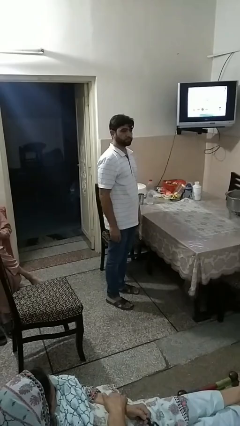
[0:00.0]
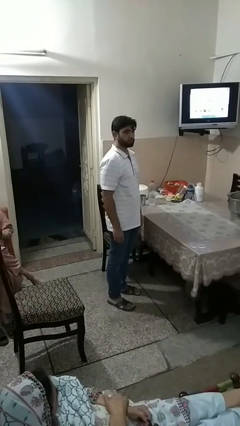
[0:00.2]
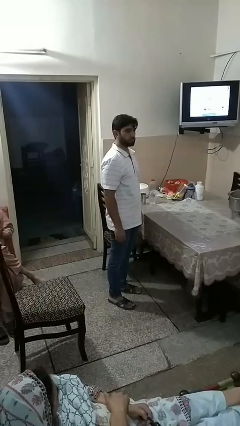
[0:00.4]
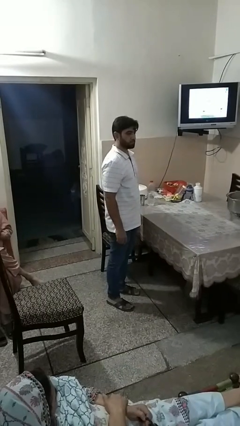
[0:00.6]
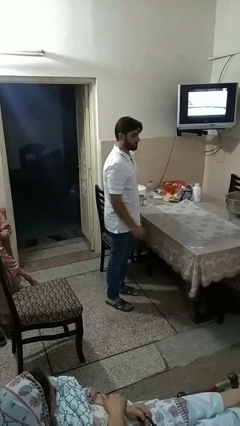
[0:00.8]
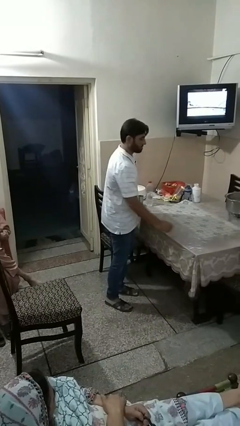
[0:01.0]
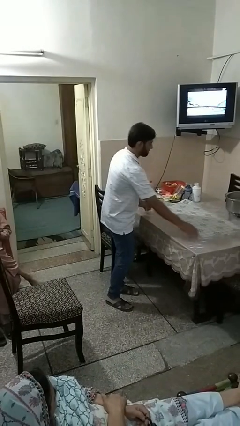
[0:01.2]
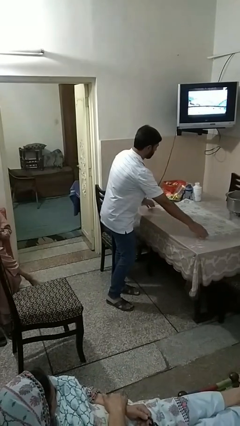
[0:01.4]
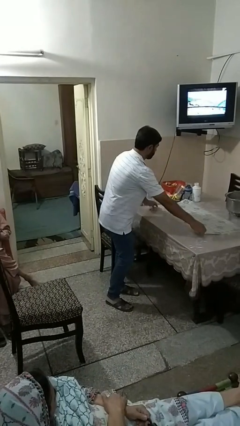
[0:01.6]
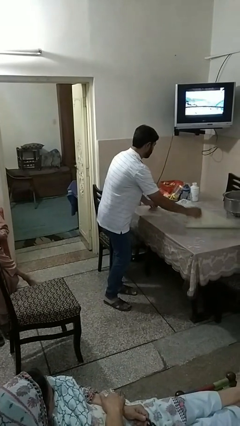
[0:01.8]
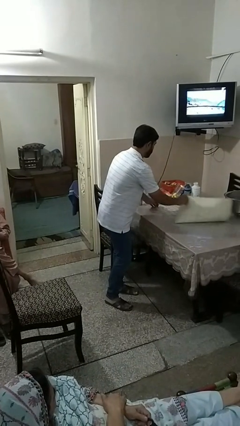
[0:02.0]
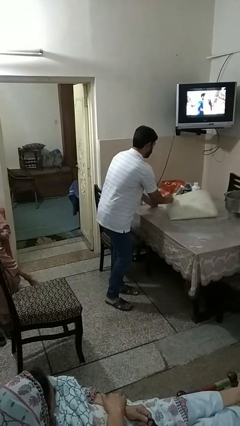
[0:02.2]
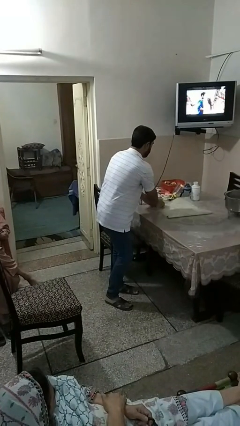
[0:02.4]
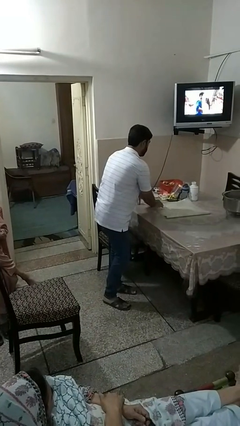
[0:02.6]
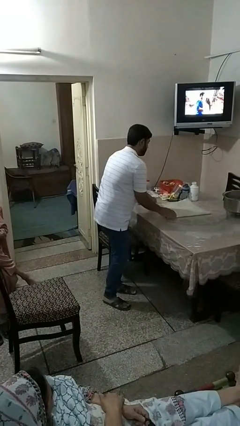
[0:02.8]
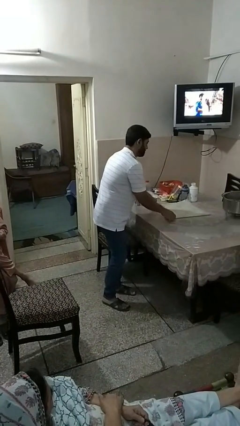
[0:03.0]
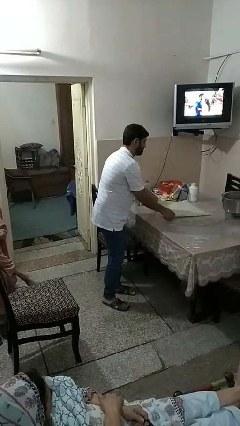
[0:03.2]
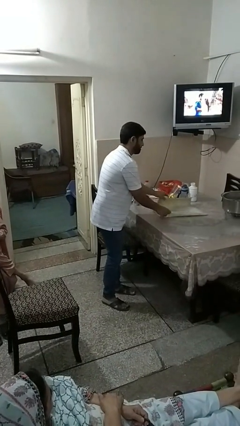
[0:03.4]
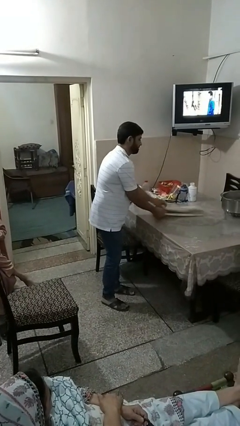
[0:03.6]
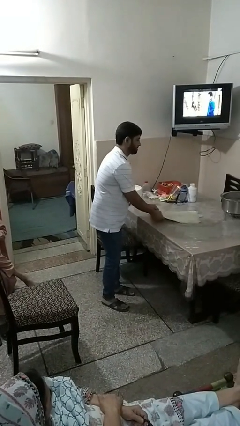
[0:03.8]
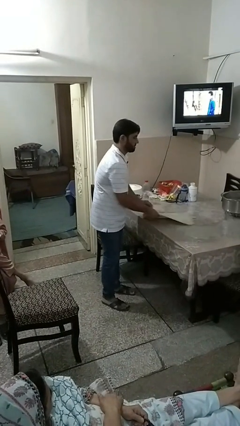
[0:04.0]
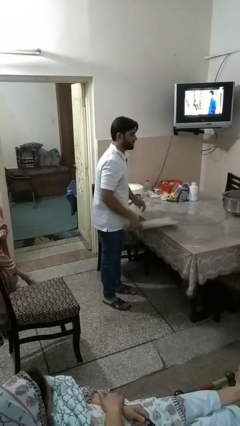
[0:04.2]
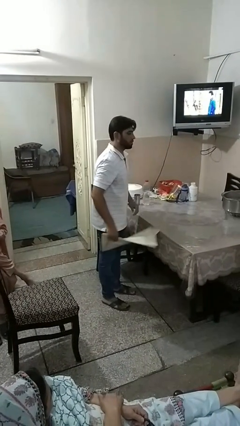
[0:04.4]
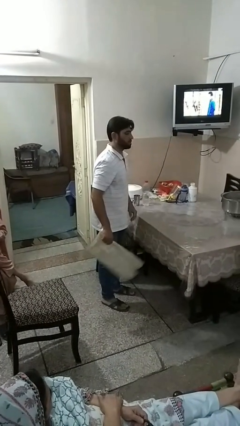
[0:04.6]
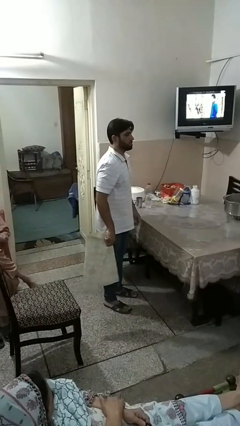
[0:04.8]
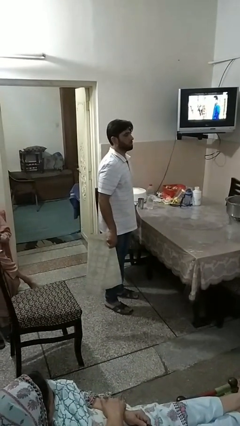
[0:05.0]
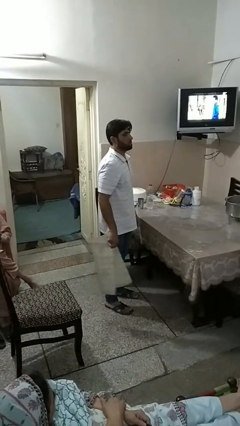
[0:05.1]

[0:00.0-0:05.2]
person folds tablecloth

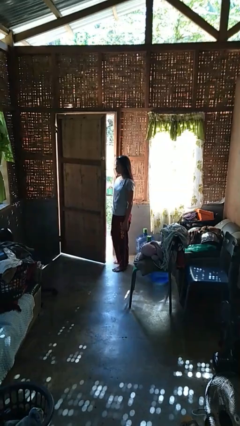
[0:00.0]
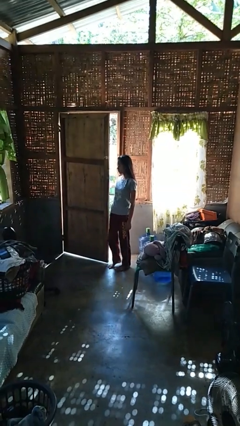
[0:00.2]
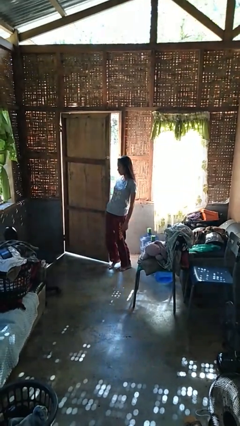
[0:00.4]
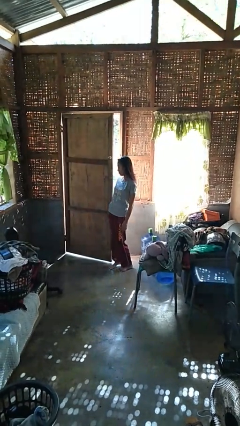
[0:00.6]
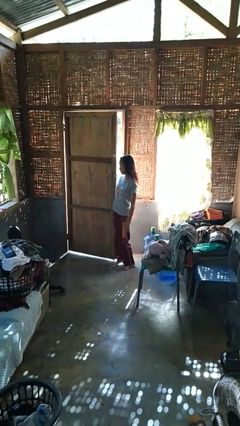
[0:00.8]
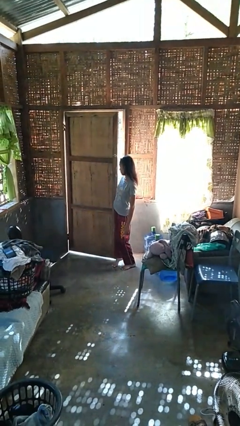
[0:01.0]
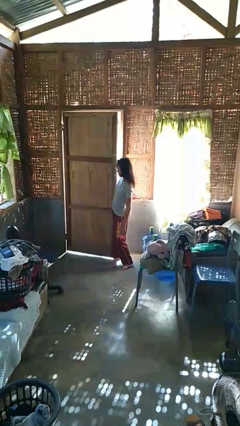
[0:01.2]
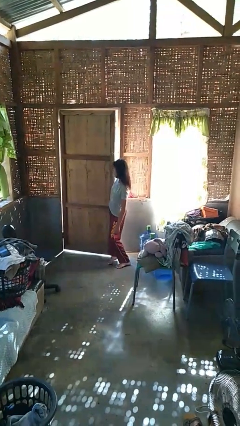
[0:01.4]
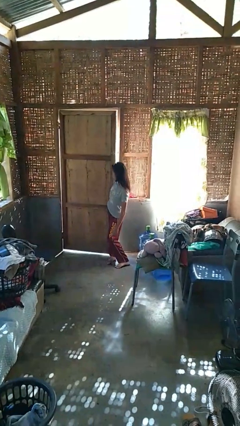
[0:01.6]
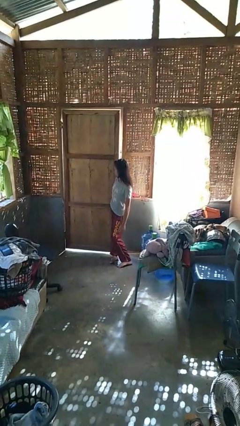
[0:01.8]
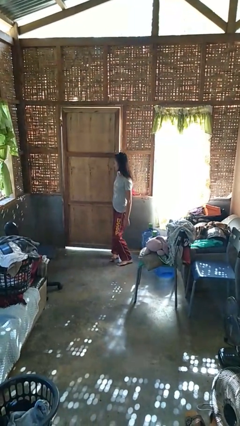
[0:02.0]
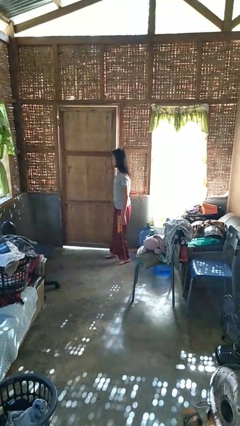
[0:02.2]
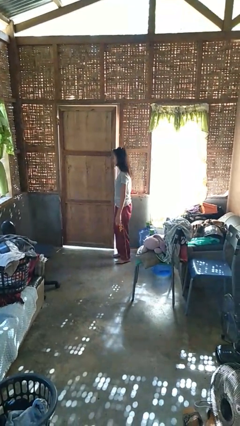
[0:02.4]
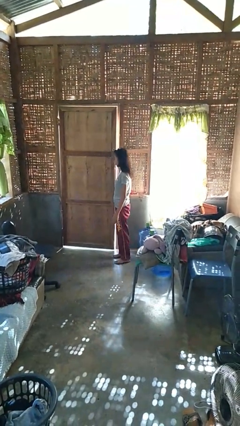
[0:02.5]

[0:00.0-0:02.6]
person closes door with hip

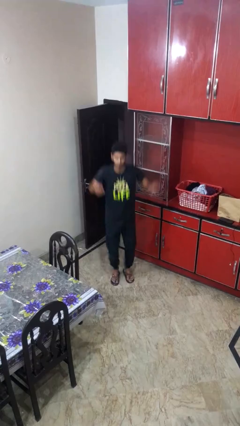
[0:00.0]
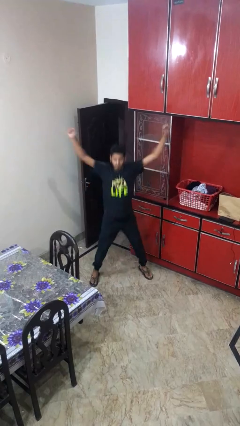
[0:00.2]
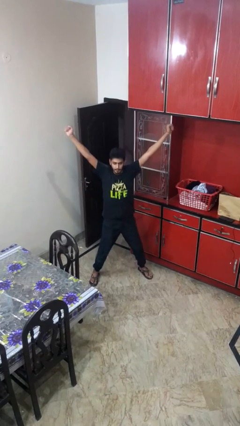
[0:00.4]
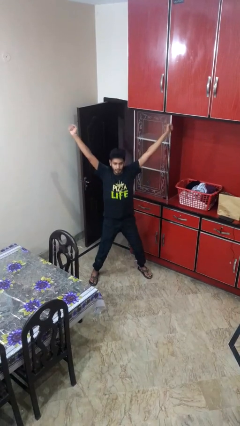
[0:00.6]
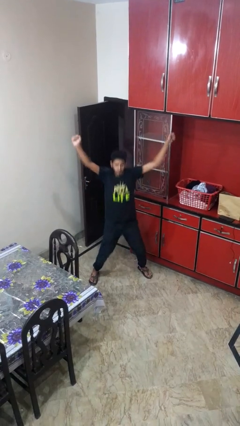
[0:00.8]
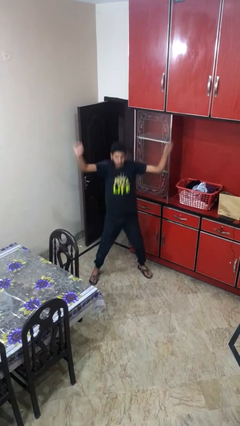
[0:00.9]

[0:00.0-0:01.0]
person exercises with jumping jacks

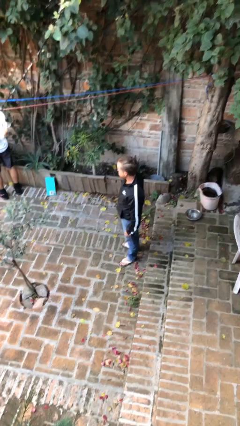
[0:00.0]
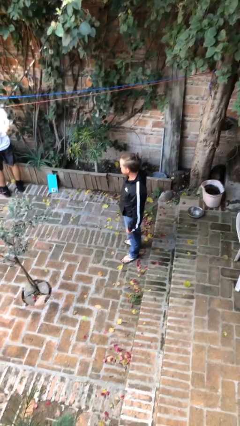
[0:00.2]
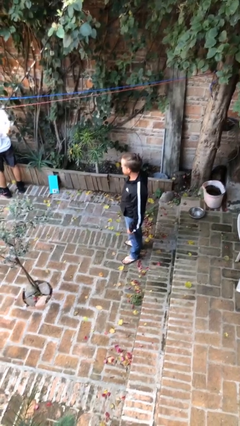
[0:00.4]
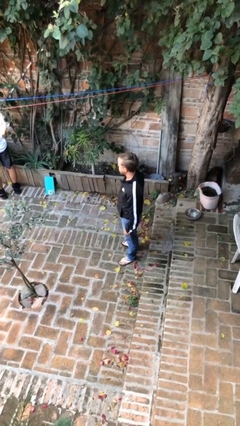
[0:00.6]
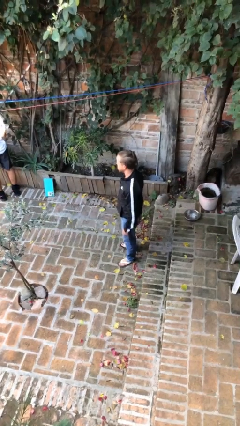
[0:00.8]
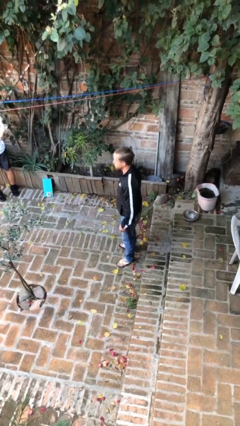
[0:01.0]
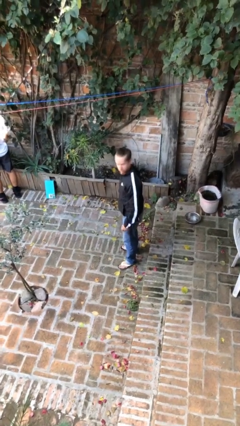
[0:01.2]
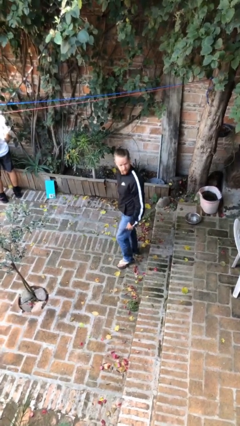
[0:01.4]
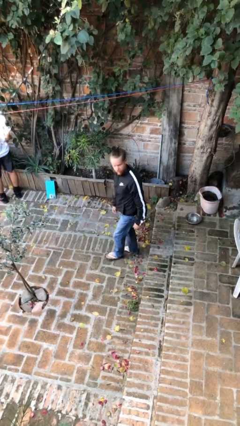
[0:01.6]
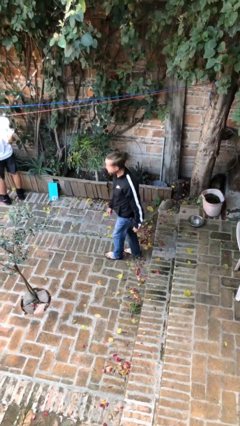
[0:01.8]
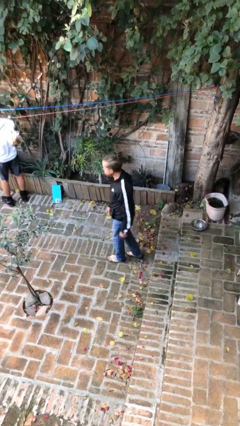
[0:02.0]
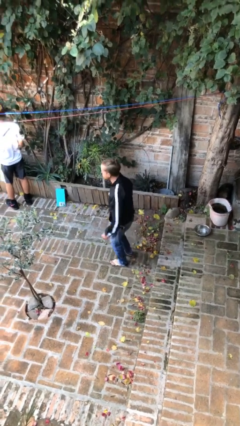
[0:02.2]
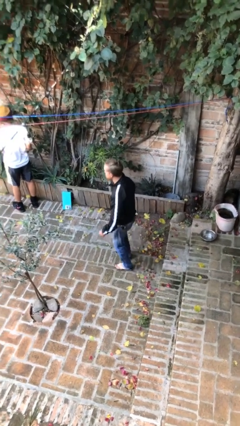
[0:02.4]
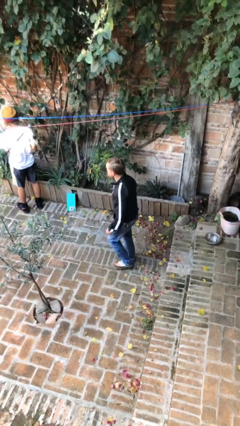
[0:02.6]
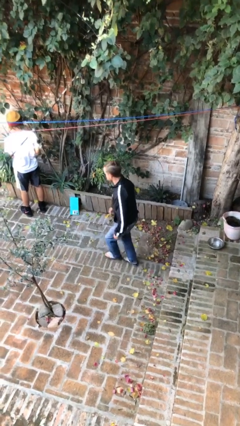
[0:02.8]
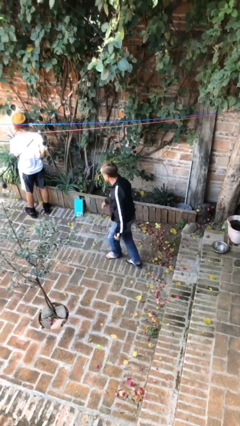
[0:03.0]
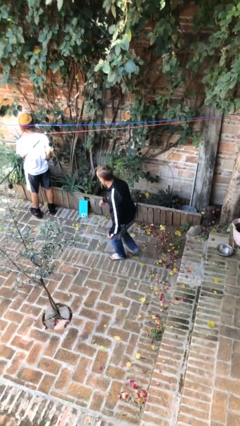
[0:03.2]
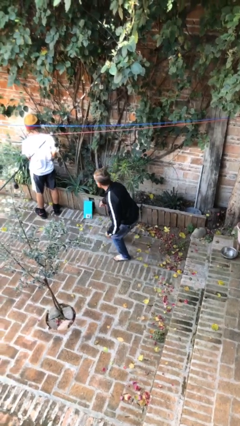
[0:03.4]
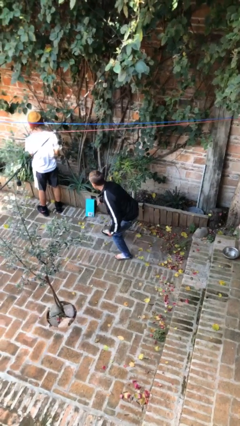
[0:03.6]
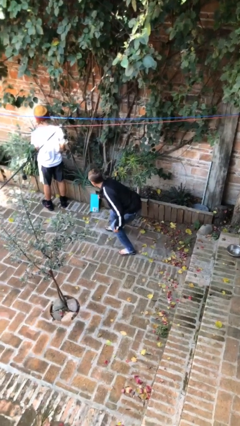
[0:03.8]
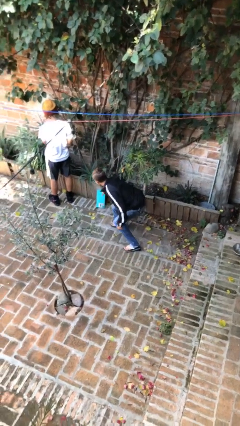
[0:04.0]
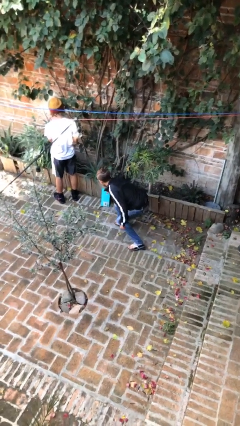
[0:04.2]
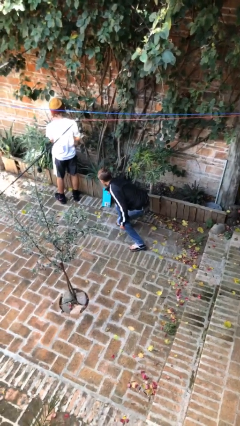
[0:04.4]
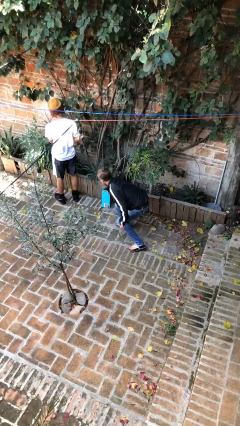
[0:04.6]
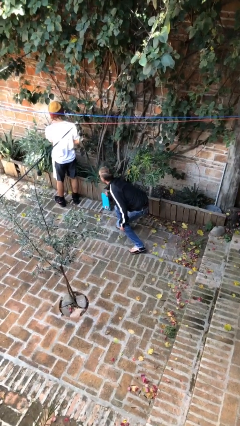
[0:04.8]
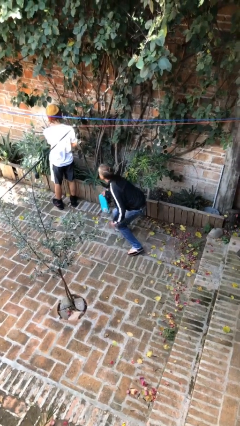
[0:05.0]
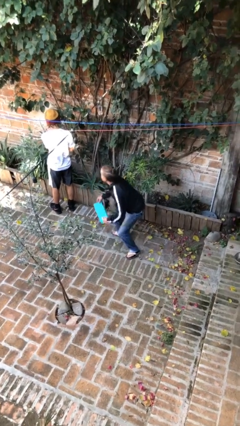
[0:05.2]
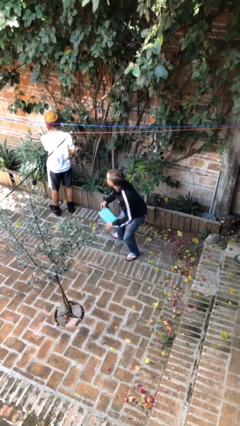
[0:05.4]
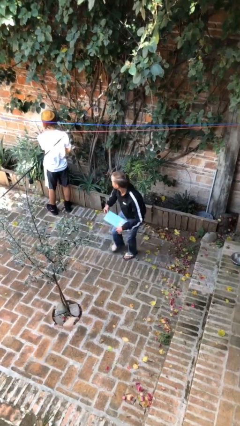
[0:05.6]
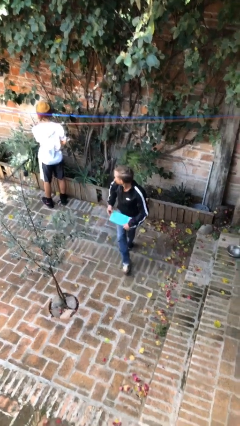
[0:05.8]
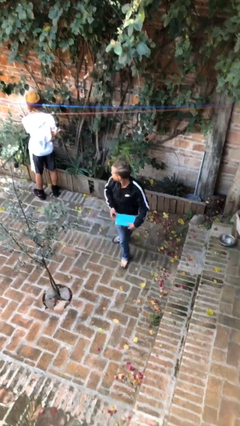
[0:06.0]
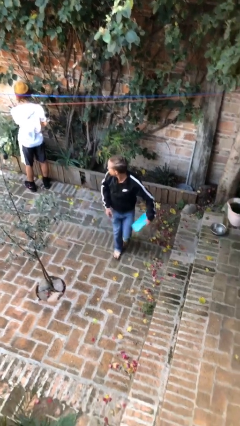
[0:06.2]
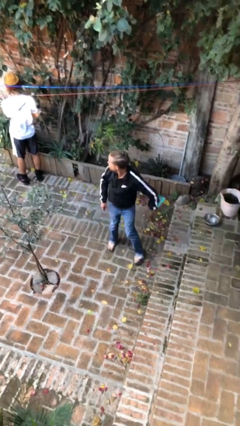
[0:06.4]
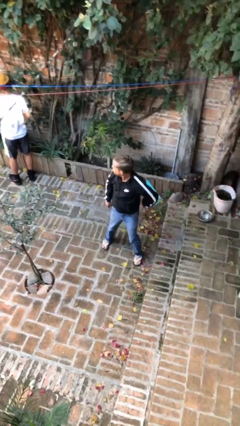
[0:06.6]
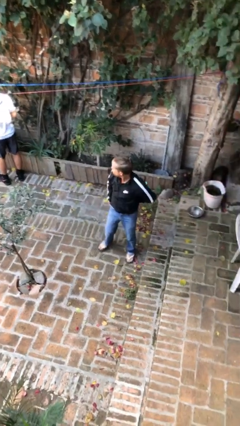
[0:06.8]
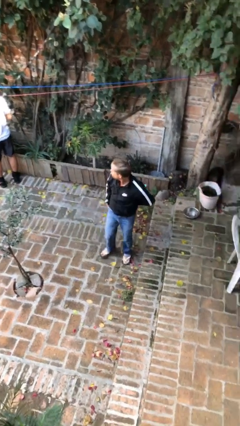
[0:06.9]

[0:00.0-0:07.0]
person steals object from person

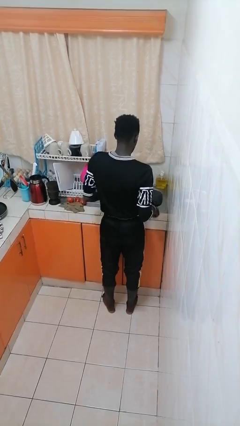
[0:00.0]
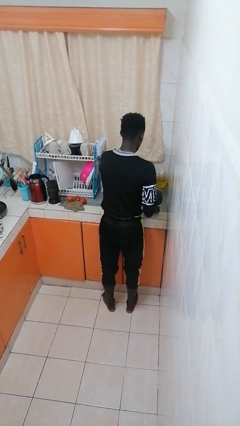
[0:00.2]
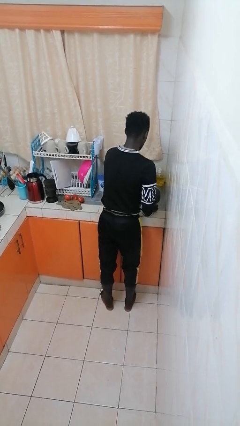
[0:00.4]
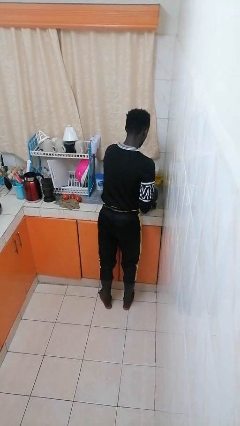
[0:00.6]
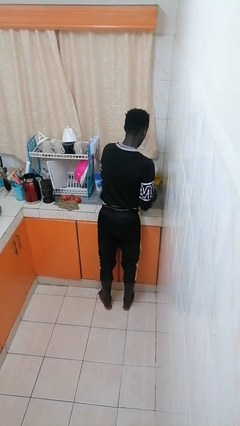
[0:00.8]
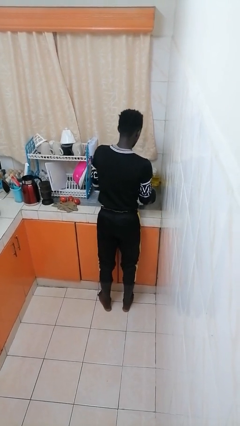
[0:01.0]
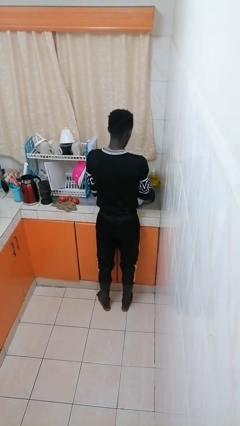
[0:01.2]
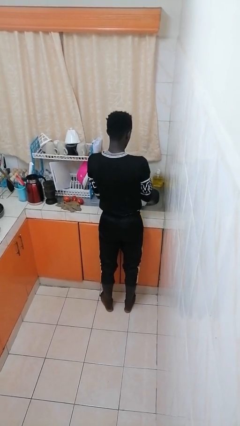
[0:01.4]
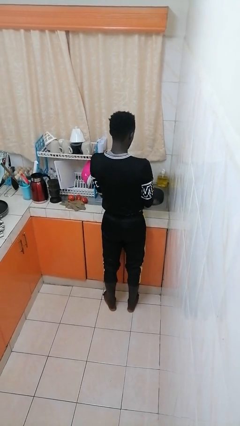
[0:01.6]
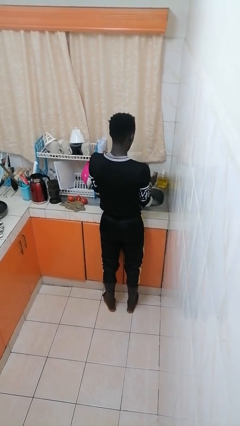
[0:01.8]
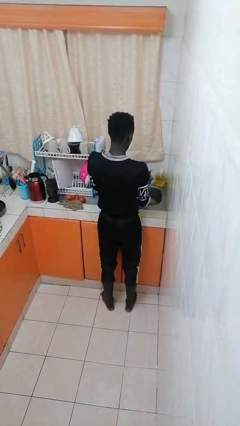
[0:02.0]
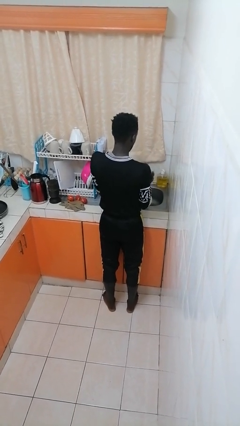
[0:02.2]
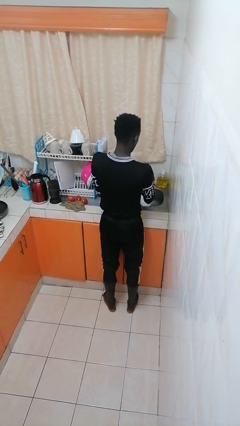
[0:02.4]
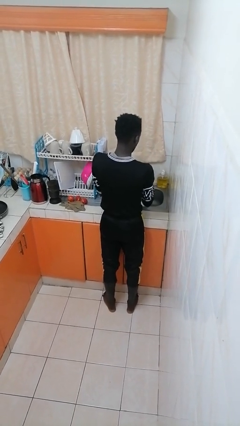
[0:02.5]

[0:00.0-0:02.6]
person washes dish
